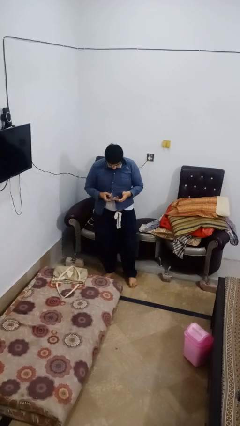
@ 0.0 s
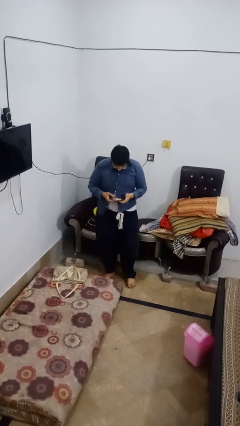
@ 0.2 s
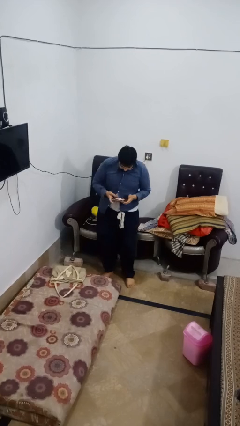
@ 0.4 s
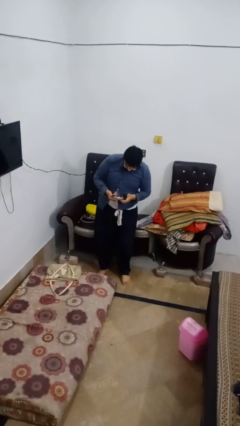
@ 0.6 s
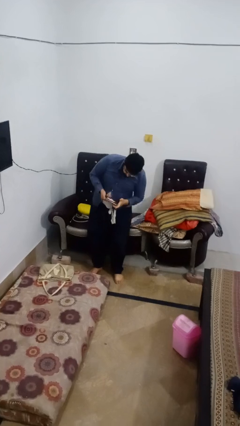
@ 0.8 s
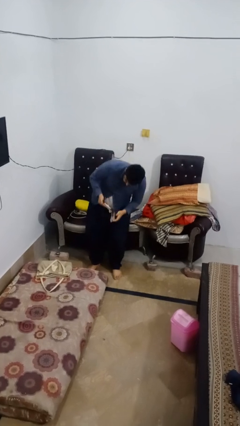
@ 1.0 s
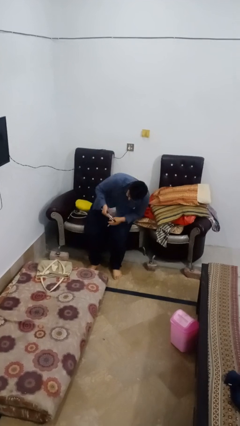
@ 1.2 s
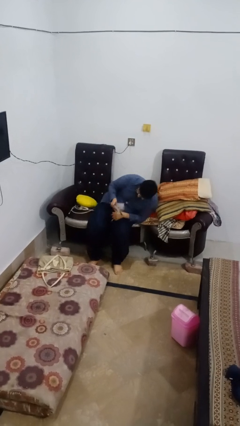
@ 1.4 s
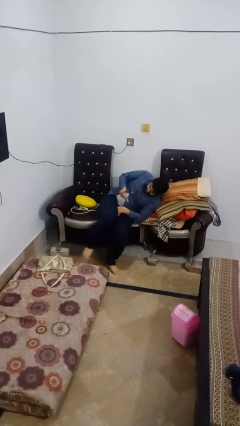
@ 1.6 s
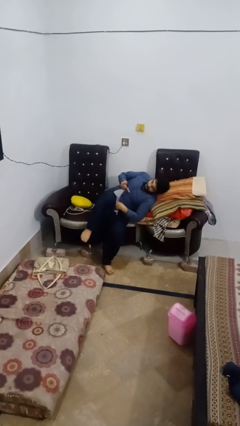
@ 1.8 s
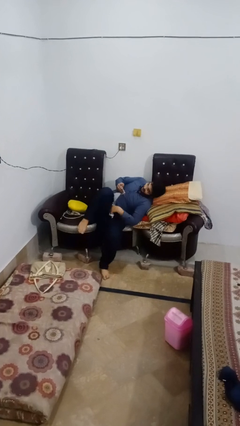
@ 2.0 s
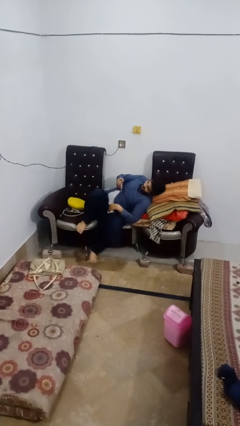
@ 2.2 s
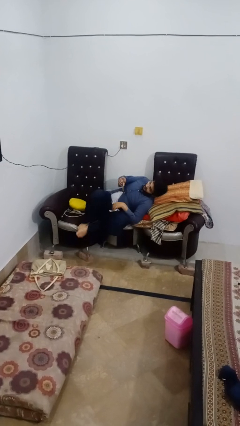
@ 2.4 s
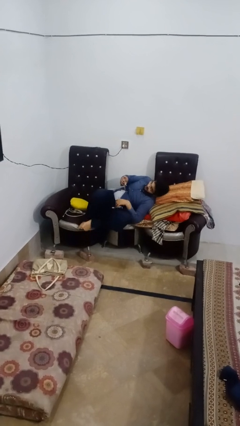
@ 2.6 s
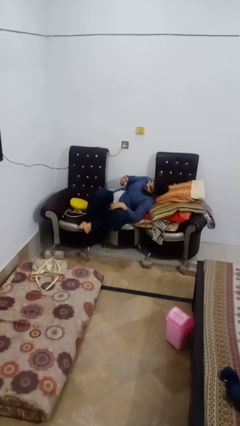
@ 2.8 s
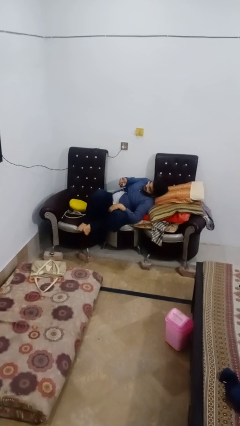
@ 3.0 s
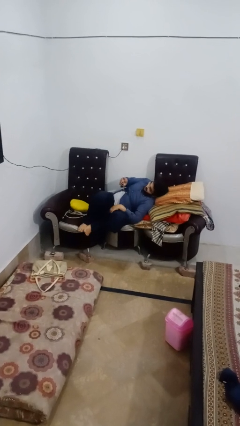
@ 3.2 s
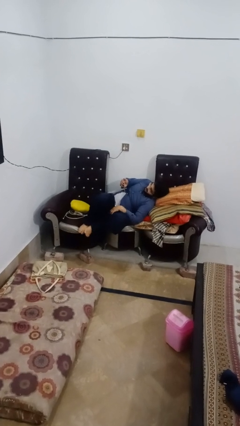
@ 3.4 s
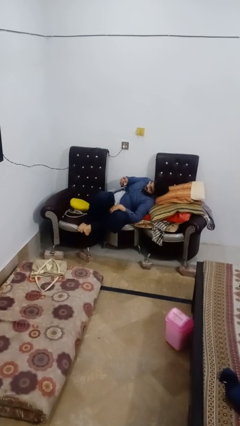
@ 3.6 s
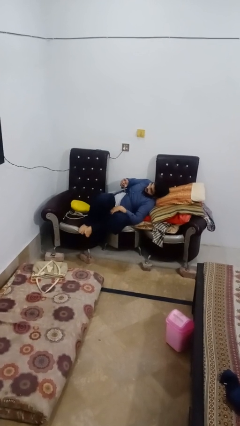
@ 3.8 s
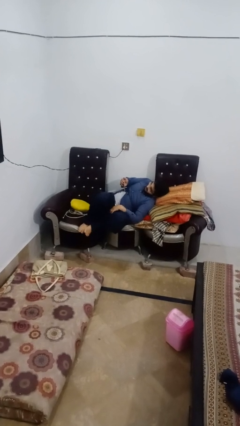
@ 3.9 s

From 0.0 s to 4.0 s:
person lies down on couch

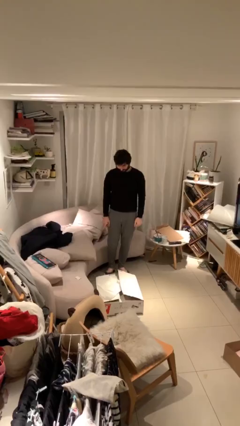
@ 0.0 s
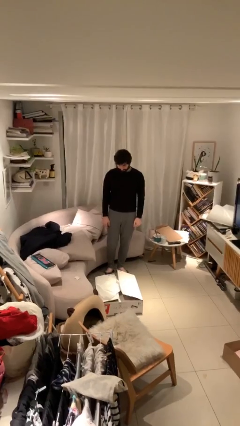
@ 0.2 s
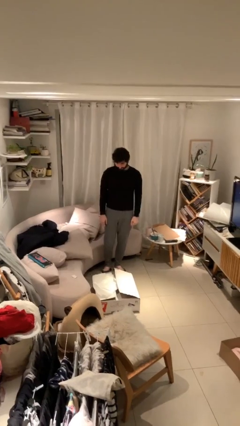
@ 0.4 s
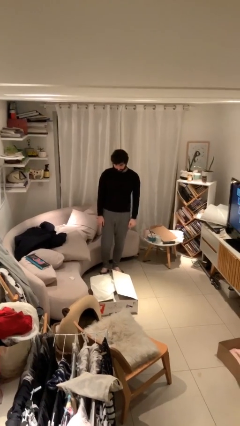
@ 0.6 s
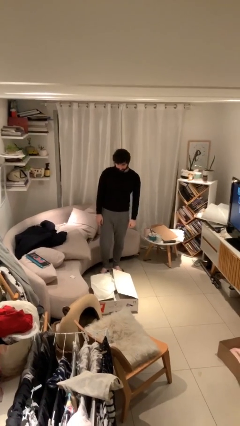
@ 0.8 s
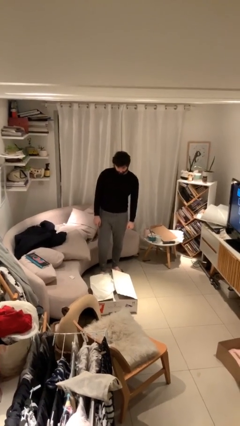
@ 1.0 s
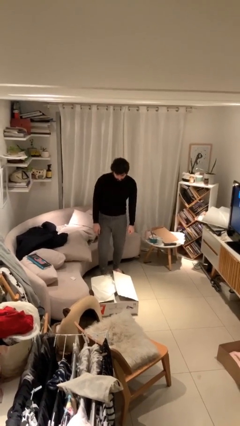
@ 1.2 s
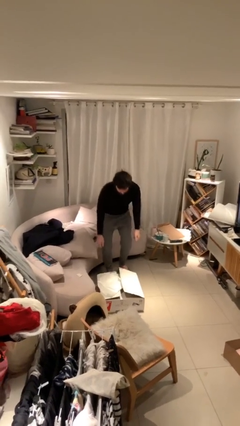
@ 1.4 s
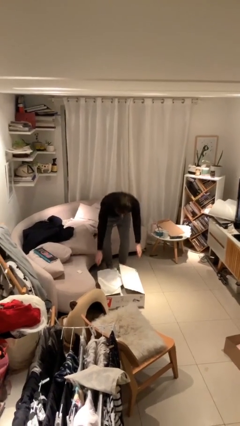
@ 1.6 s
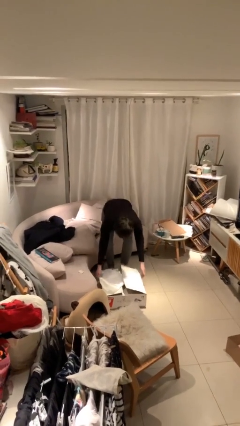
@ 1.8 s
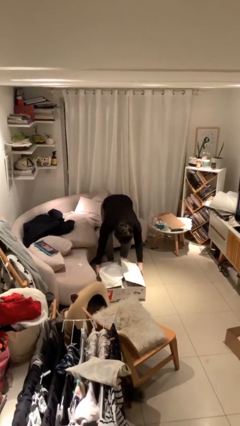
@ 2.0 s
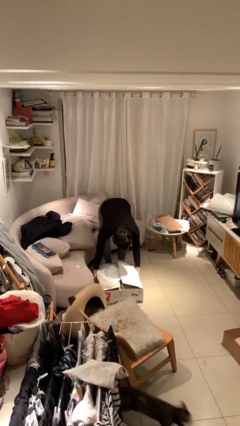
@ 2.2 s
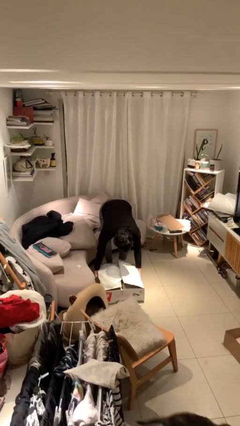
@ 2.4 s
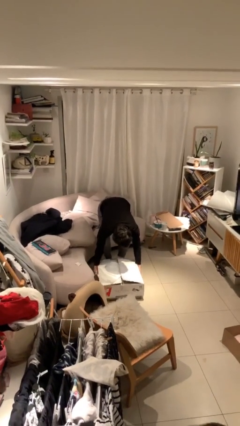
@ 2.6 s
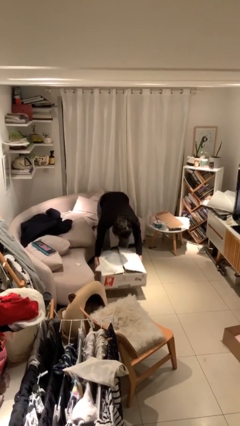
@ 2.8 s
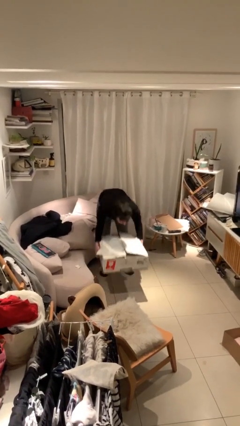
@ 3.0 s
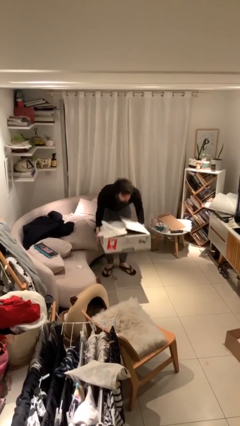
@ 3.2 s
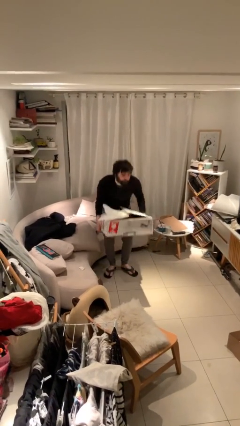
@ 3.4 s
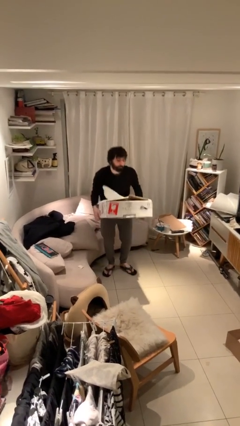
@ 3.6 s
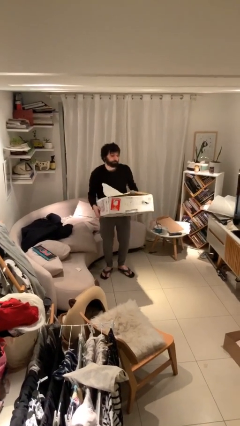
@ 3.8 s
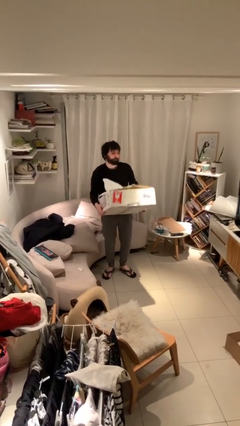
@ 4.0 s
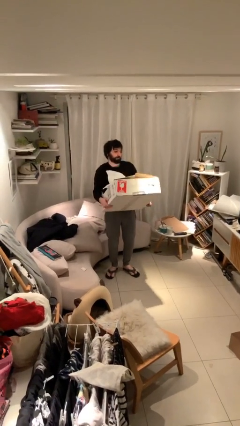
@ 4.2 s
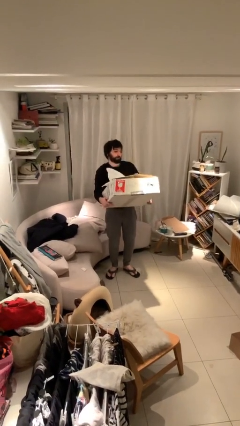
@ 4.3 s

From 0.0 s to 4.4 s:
person picks up object from floor

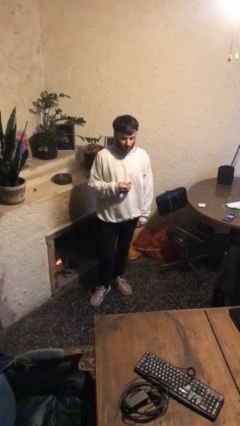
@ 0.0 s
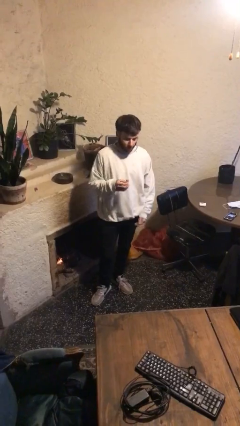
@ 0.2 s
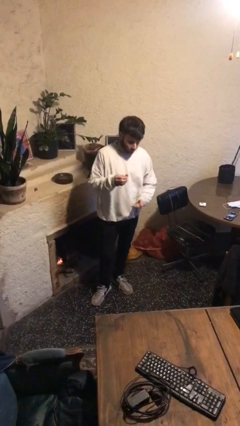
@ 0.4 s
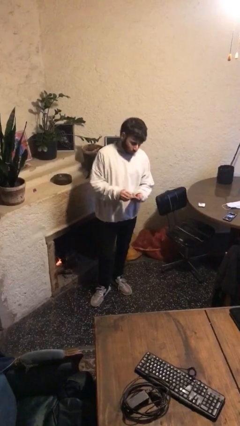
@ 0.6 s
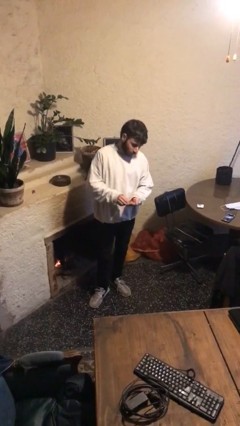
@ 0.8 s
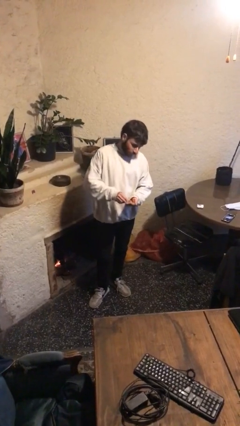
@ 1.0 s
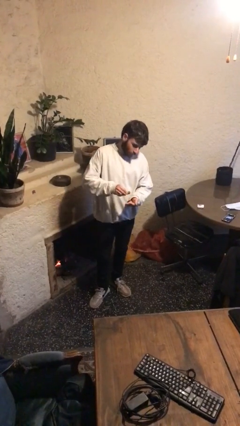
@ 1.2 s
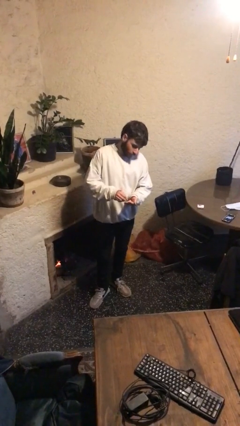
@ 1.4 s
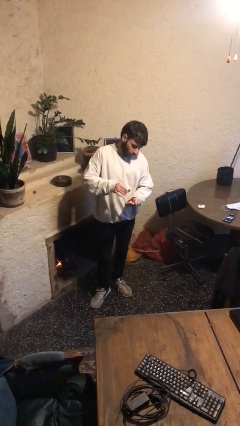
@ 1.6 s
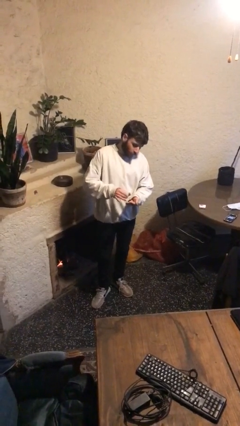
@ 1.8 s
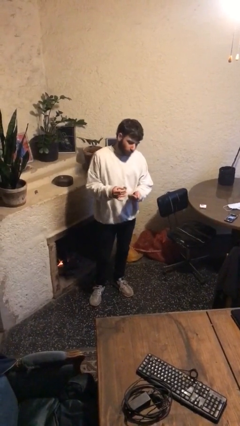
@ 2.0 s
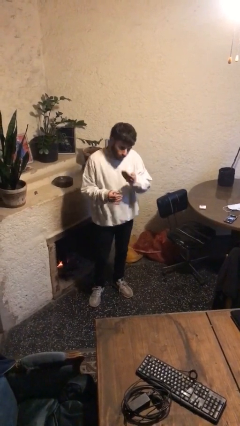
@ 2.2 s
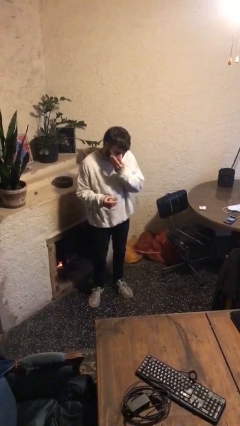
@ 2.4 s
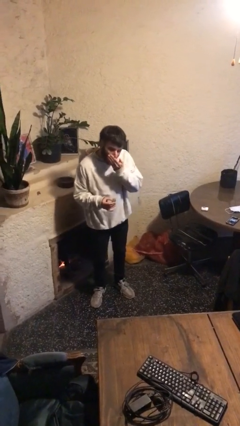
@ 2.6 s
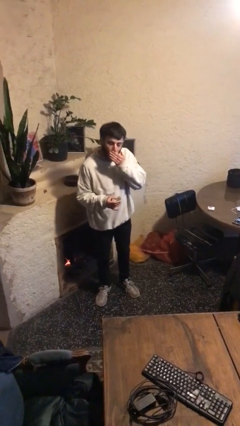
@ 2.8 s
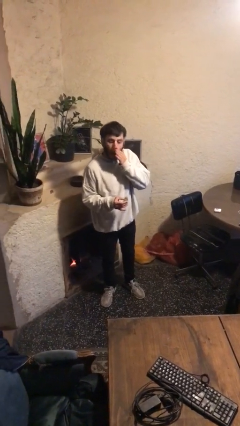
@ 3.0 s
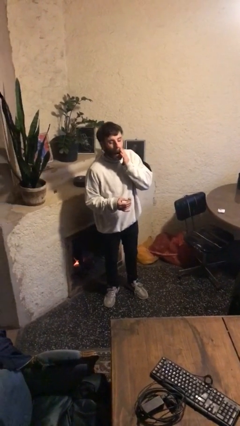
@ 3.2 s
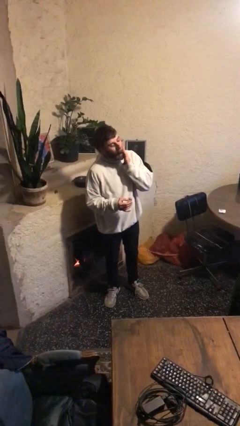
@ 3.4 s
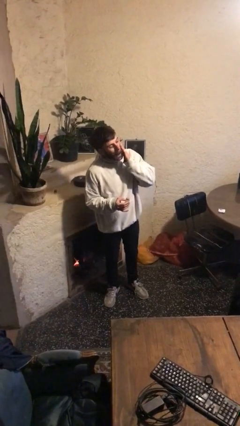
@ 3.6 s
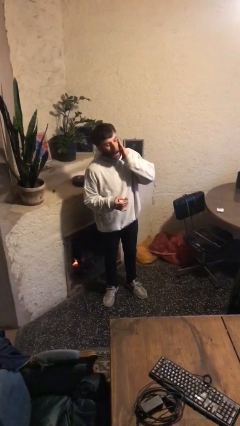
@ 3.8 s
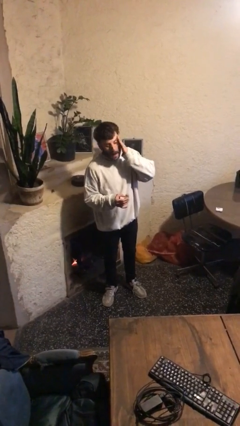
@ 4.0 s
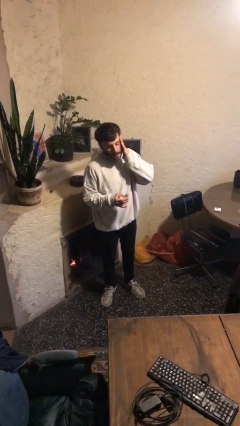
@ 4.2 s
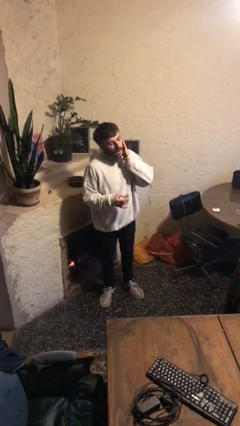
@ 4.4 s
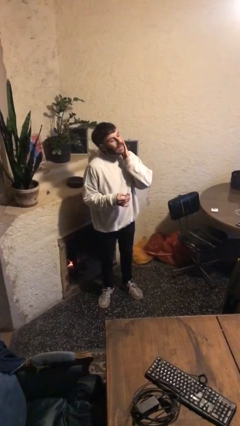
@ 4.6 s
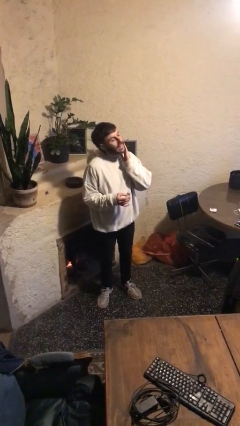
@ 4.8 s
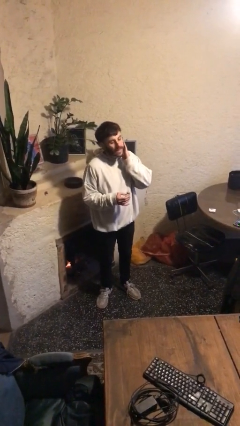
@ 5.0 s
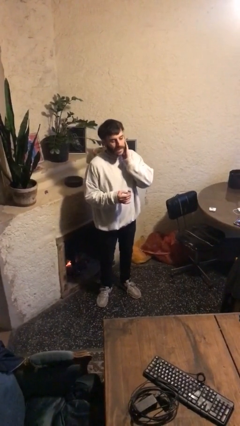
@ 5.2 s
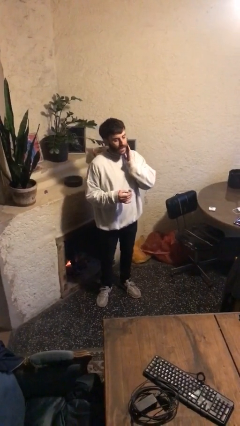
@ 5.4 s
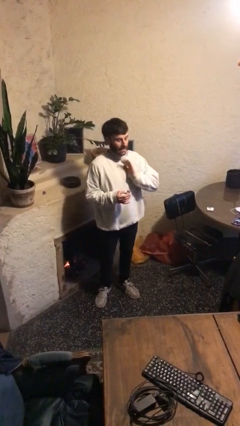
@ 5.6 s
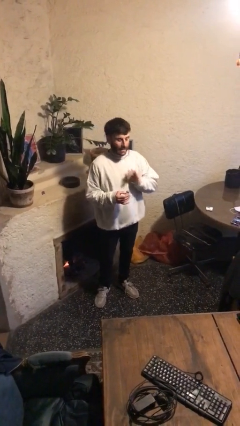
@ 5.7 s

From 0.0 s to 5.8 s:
person applies facial moisturizer

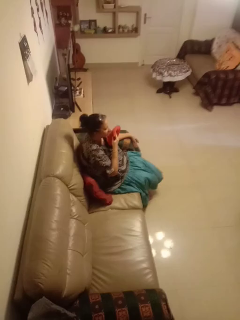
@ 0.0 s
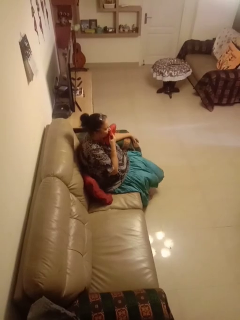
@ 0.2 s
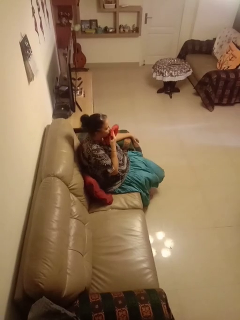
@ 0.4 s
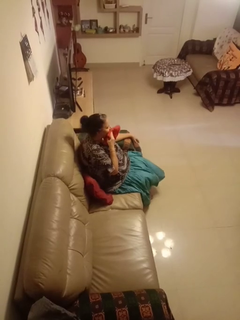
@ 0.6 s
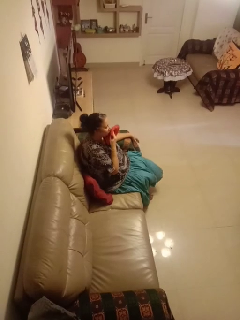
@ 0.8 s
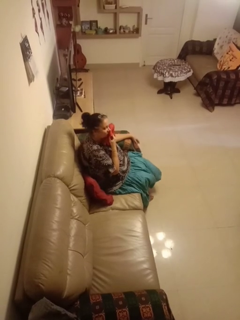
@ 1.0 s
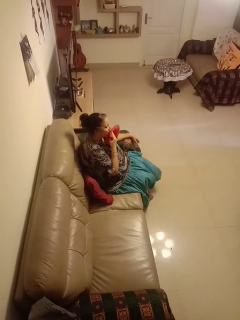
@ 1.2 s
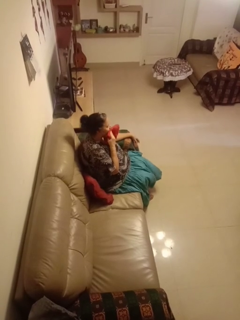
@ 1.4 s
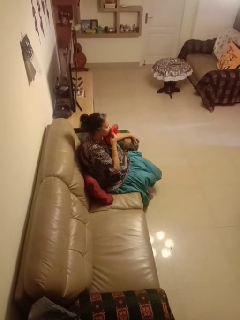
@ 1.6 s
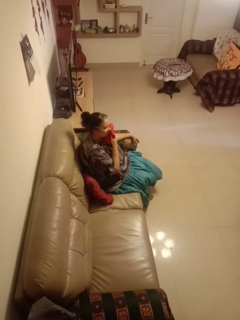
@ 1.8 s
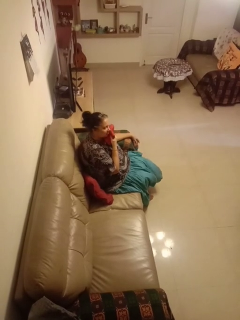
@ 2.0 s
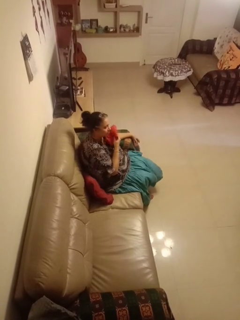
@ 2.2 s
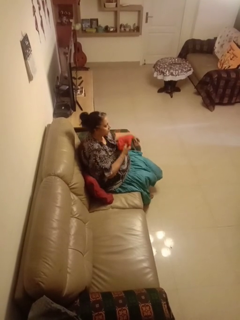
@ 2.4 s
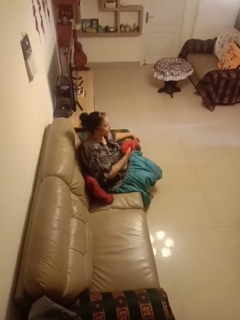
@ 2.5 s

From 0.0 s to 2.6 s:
person wipes mouth with napkin

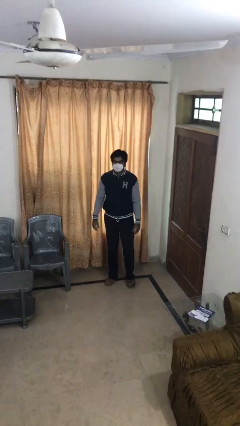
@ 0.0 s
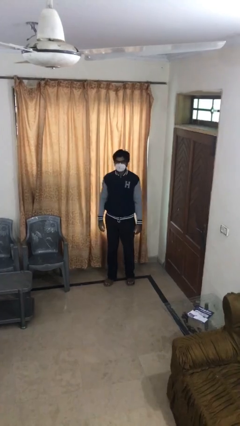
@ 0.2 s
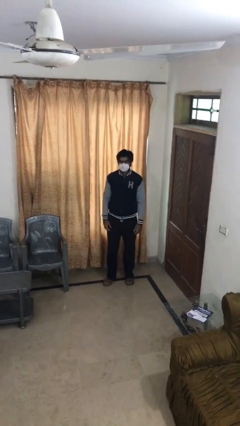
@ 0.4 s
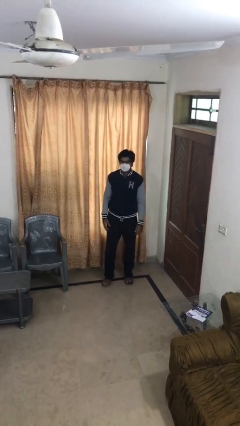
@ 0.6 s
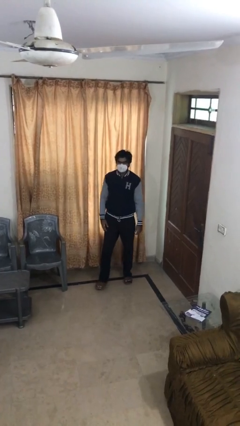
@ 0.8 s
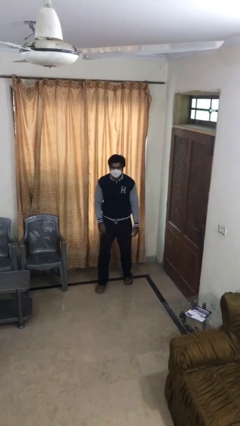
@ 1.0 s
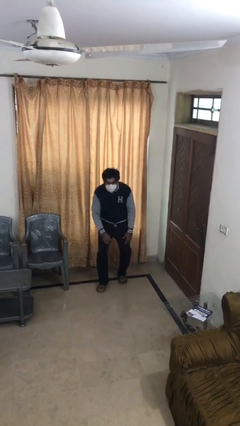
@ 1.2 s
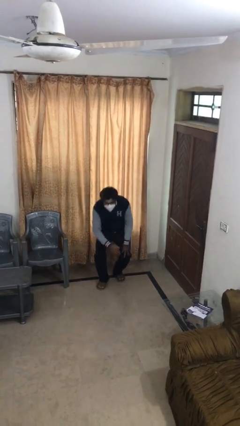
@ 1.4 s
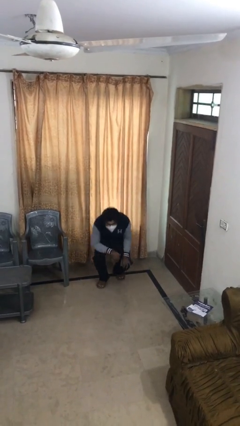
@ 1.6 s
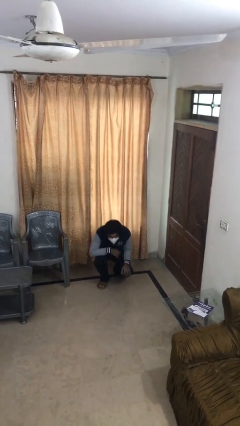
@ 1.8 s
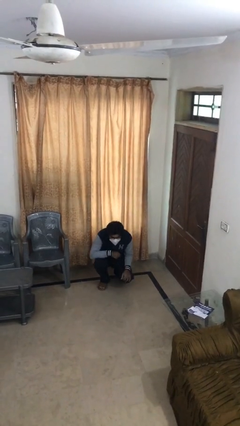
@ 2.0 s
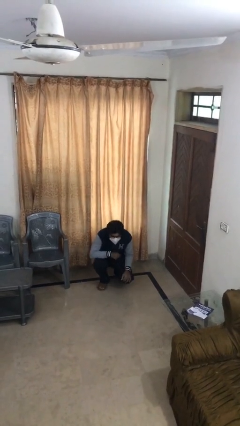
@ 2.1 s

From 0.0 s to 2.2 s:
person sits down
